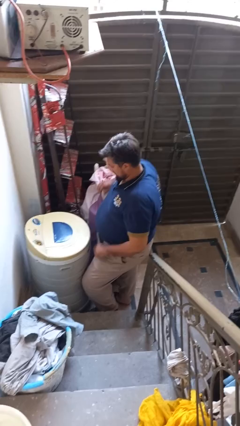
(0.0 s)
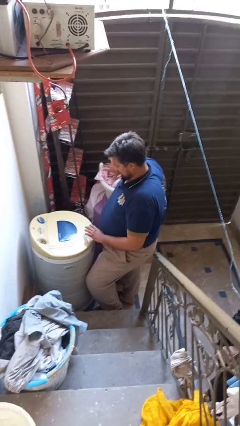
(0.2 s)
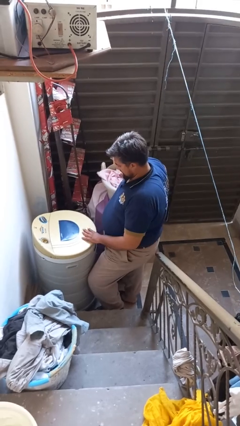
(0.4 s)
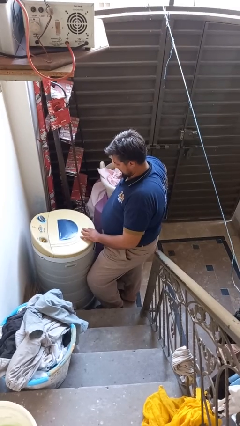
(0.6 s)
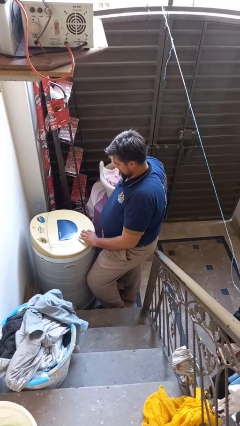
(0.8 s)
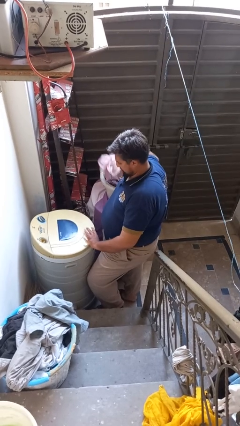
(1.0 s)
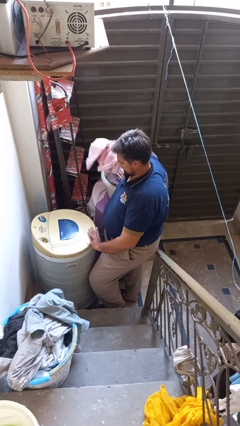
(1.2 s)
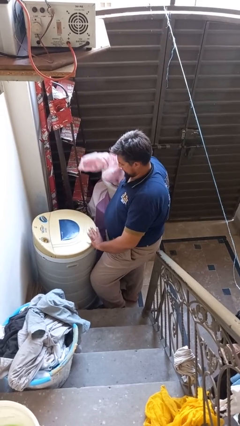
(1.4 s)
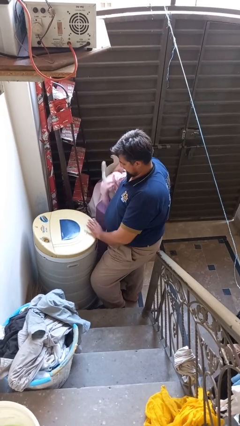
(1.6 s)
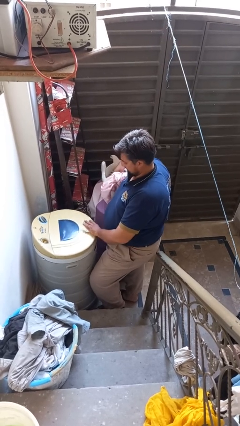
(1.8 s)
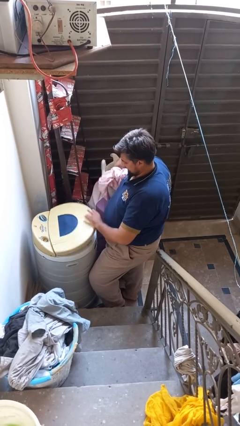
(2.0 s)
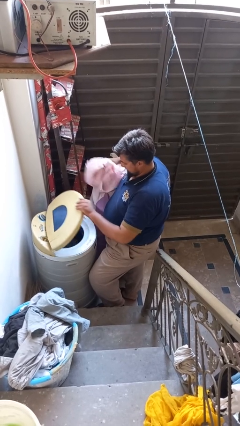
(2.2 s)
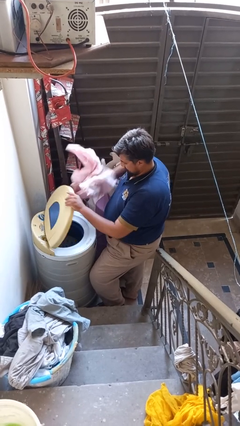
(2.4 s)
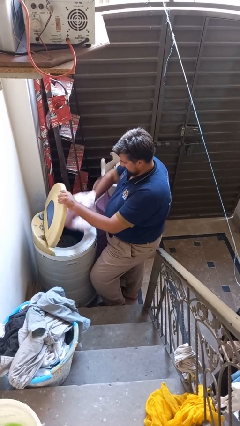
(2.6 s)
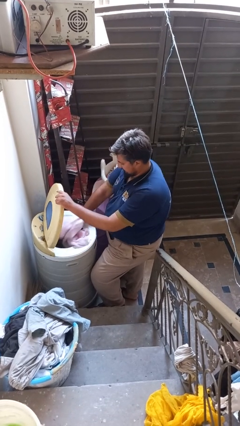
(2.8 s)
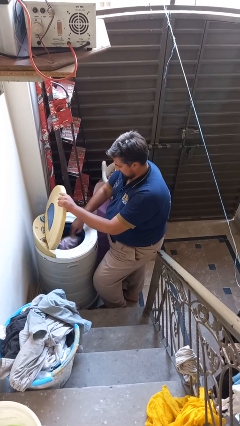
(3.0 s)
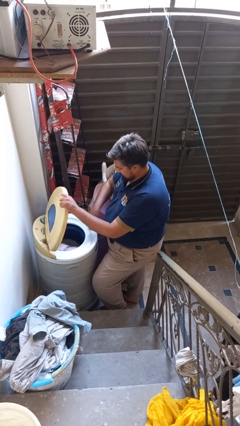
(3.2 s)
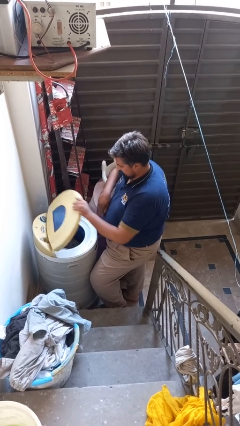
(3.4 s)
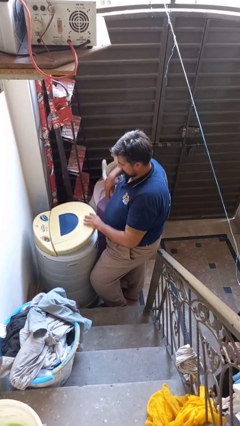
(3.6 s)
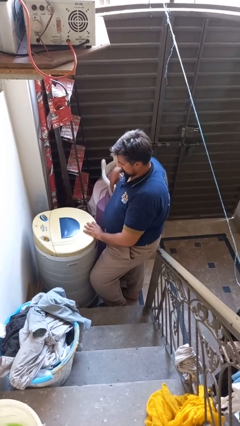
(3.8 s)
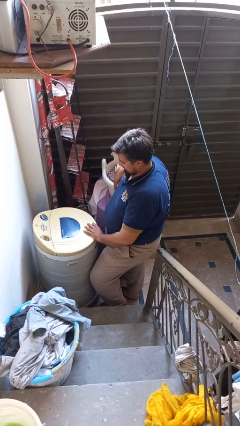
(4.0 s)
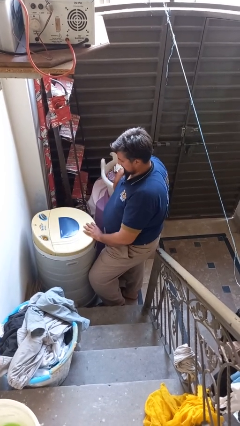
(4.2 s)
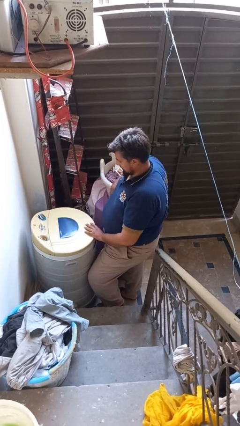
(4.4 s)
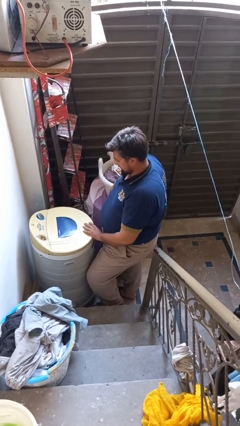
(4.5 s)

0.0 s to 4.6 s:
person loads dryer

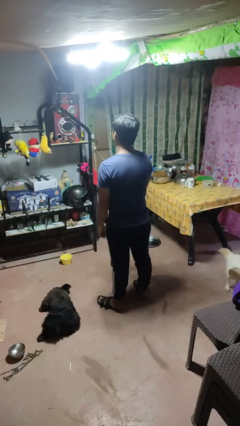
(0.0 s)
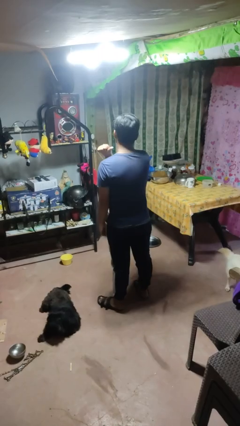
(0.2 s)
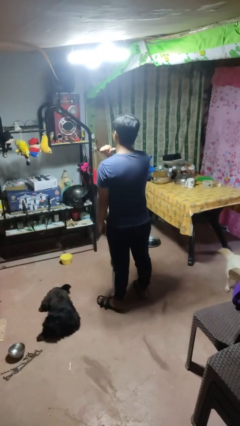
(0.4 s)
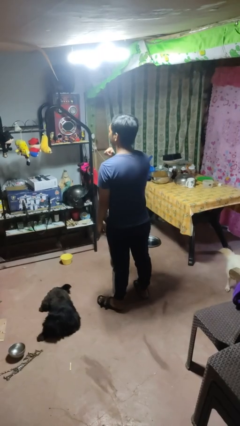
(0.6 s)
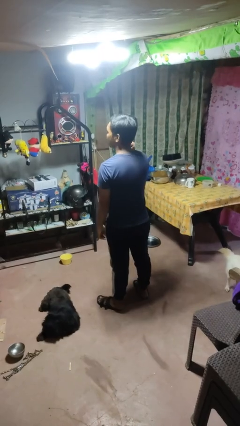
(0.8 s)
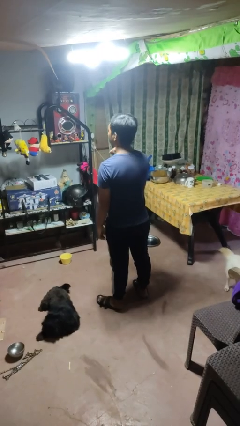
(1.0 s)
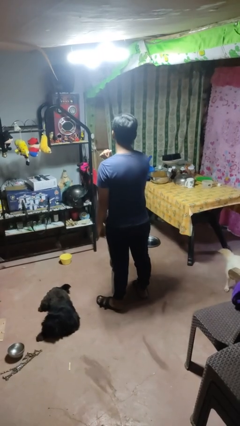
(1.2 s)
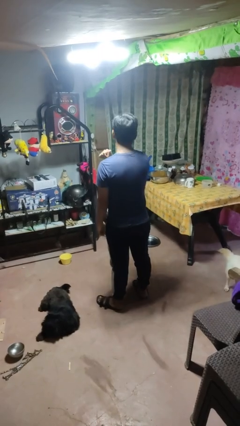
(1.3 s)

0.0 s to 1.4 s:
person gestures cut

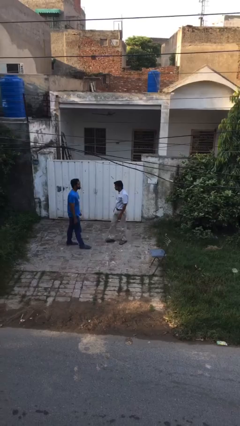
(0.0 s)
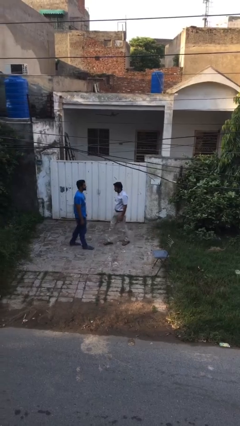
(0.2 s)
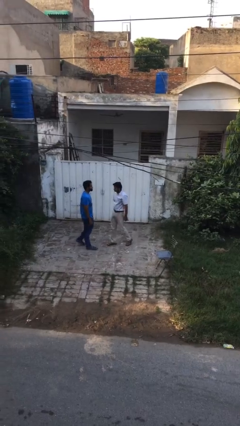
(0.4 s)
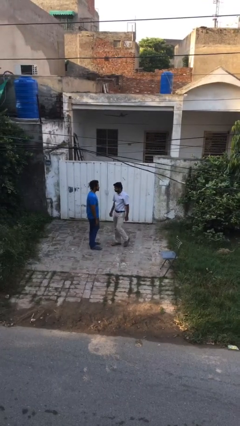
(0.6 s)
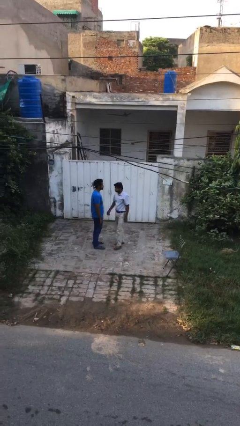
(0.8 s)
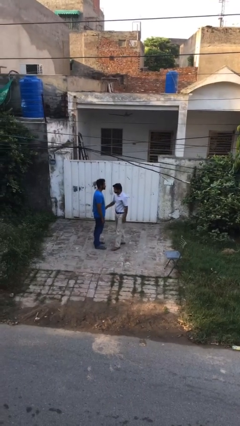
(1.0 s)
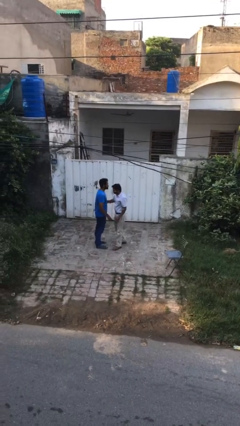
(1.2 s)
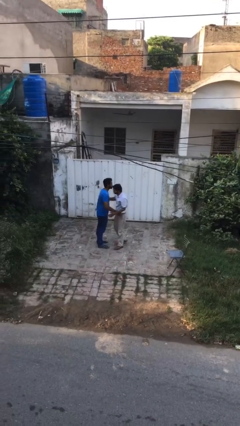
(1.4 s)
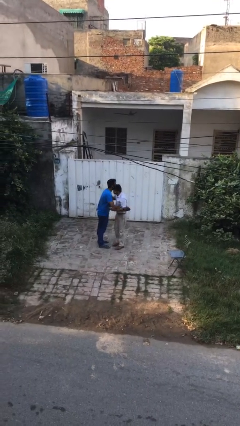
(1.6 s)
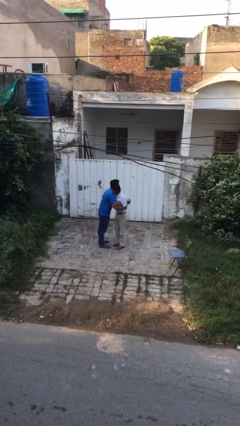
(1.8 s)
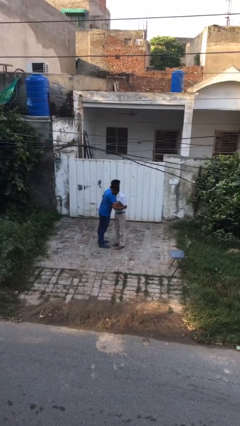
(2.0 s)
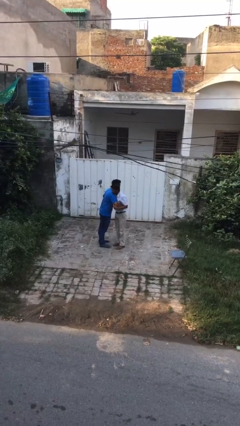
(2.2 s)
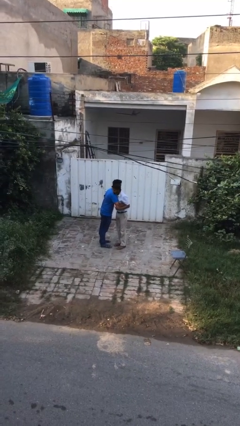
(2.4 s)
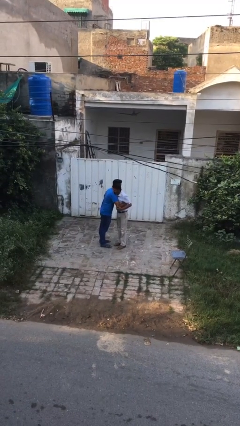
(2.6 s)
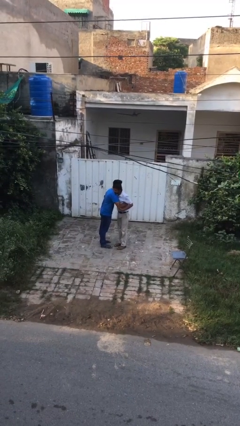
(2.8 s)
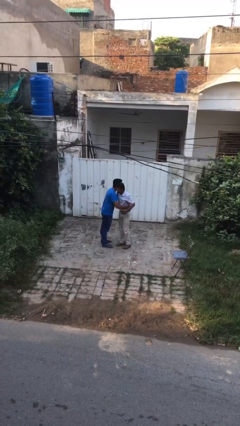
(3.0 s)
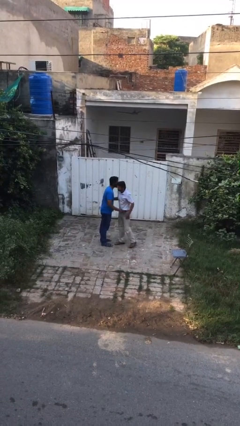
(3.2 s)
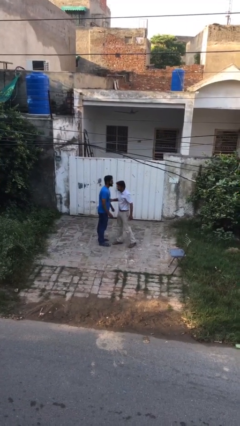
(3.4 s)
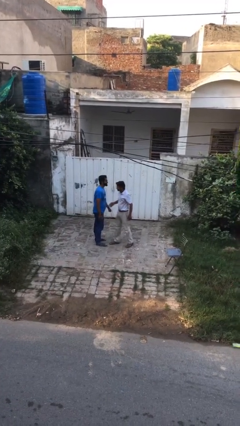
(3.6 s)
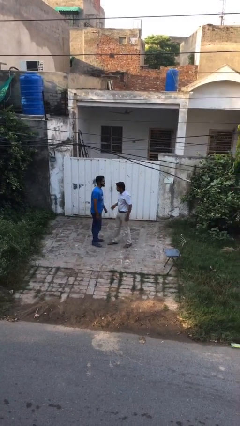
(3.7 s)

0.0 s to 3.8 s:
person embraces person

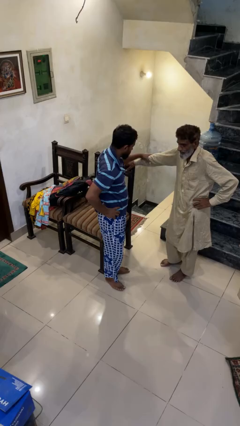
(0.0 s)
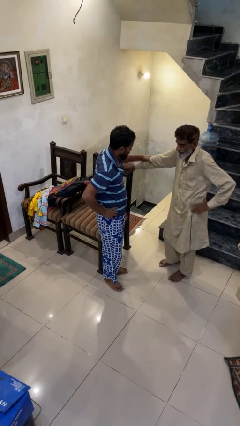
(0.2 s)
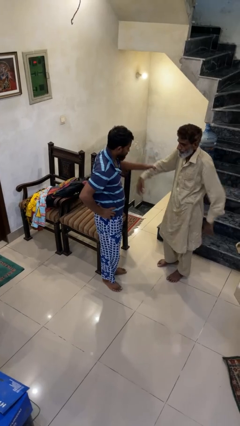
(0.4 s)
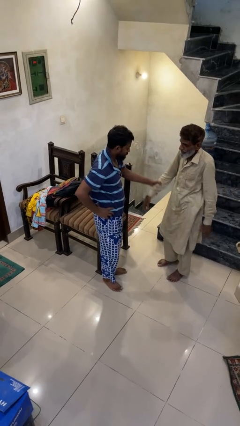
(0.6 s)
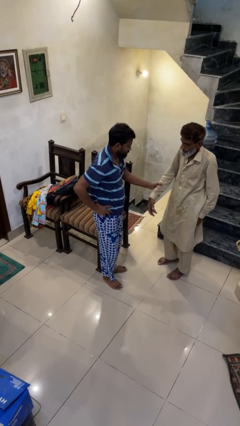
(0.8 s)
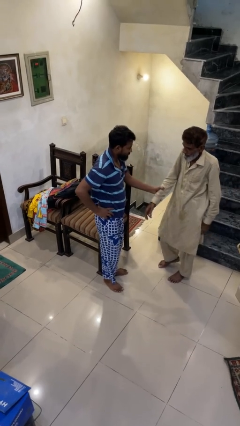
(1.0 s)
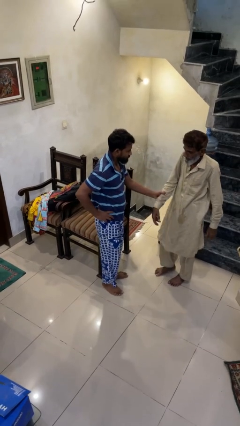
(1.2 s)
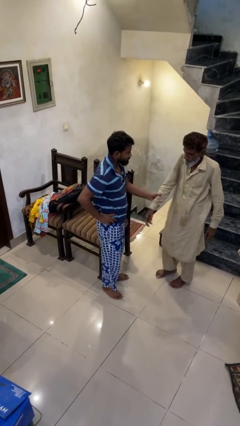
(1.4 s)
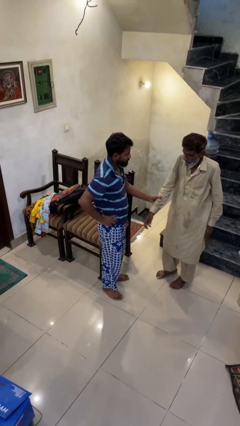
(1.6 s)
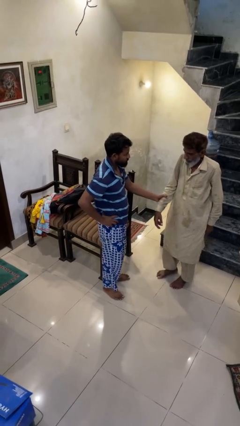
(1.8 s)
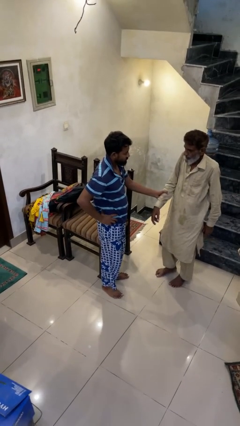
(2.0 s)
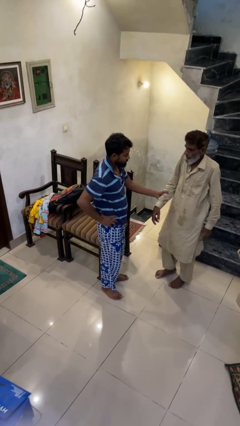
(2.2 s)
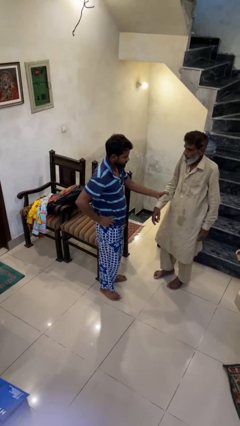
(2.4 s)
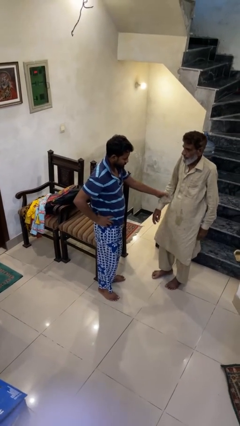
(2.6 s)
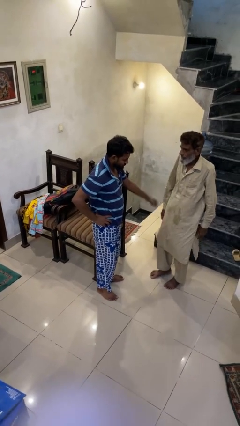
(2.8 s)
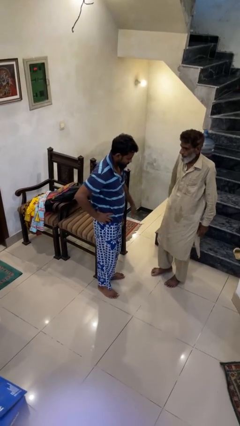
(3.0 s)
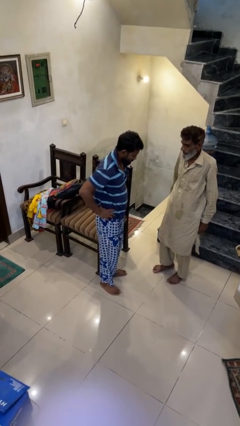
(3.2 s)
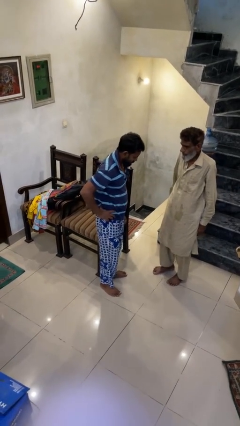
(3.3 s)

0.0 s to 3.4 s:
person grabs person by forearm

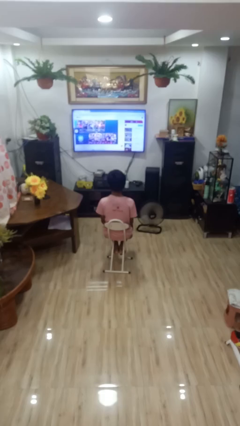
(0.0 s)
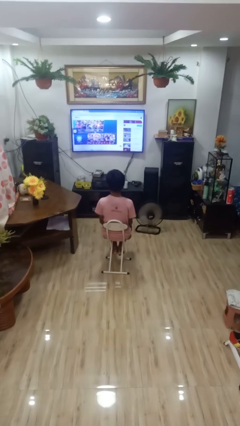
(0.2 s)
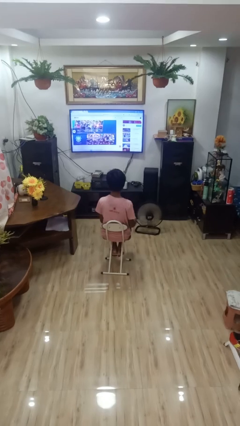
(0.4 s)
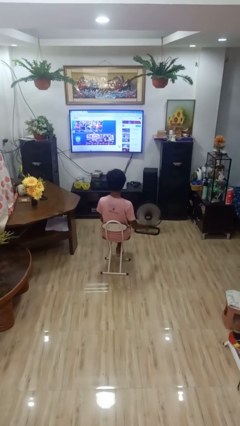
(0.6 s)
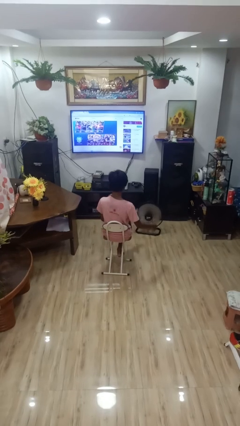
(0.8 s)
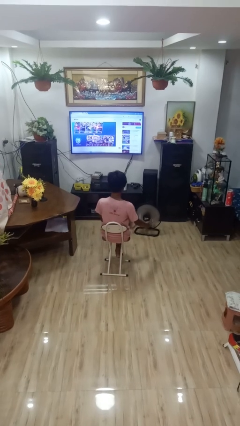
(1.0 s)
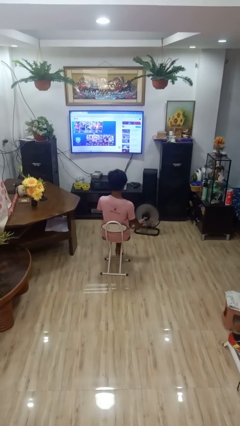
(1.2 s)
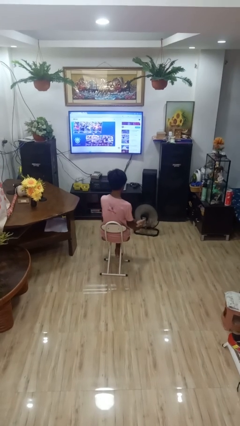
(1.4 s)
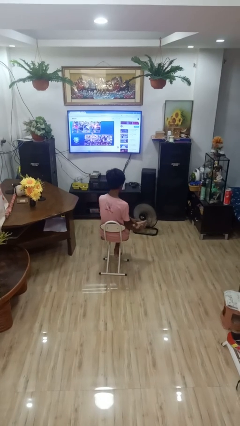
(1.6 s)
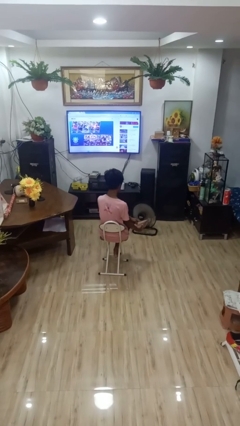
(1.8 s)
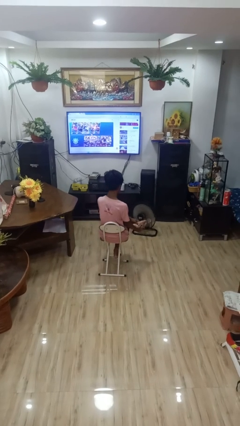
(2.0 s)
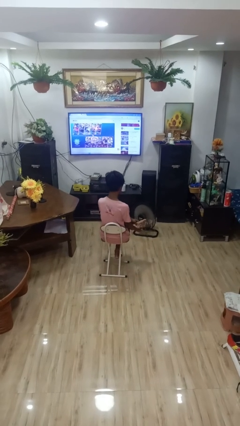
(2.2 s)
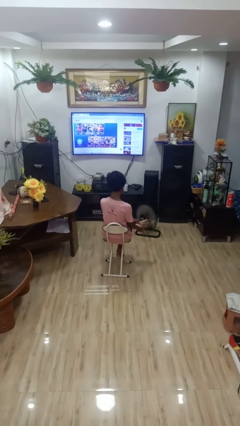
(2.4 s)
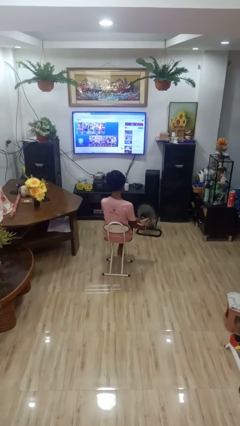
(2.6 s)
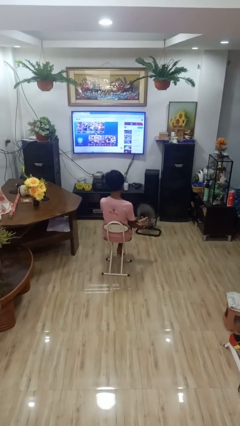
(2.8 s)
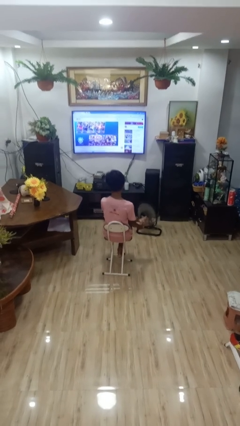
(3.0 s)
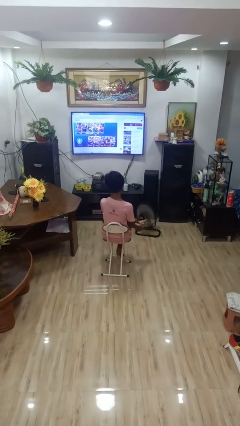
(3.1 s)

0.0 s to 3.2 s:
person rubs foot

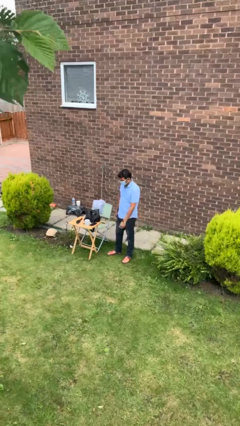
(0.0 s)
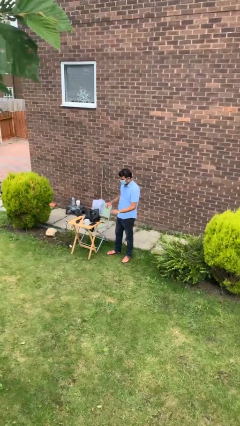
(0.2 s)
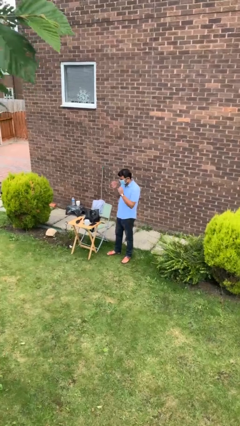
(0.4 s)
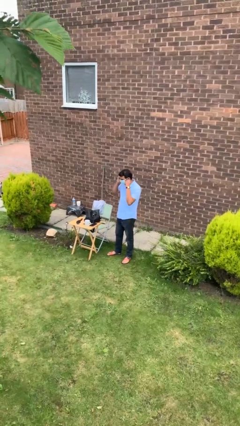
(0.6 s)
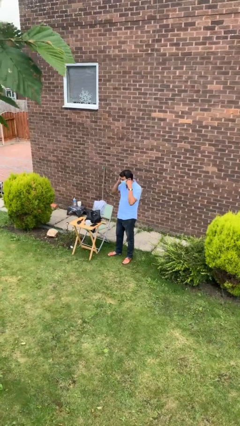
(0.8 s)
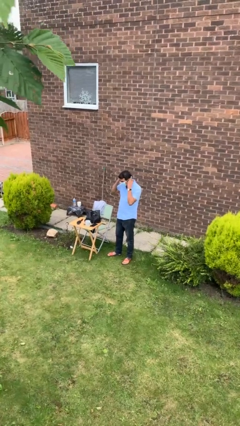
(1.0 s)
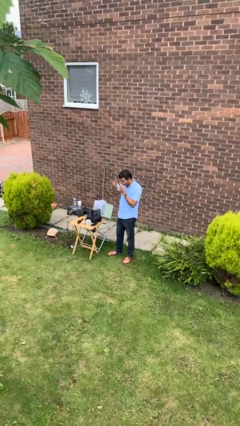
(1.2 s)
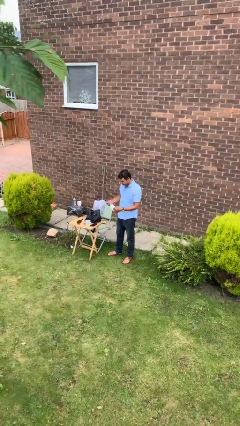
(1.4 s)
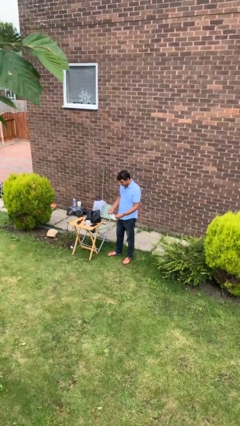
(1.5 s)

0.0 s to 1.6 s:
person takes off facemask
